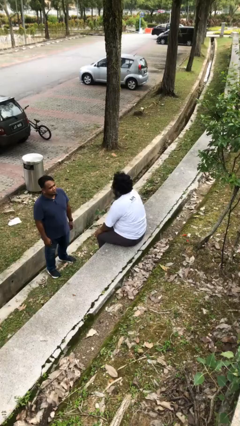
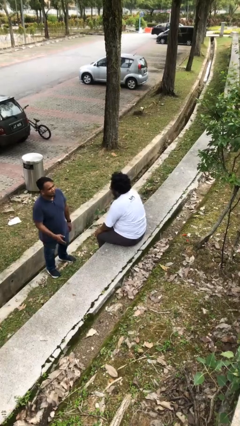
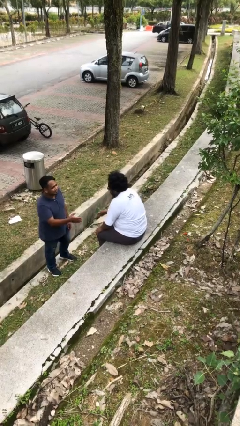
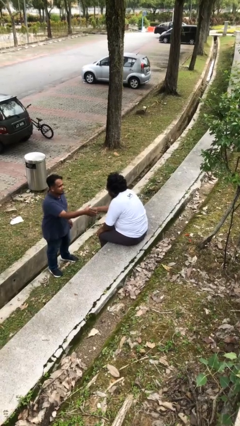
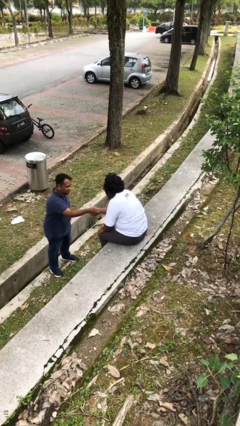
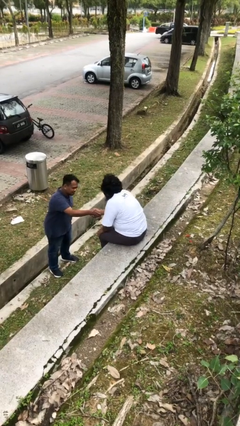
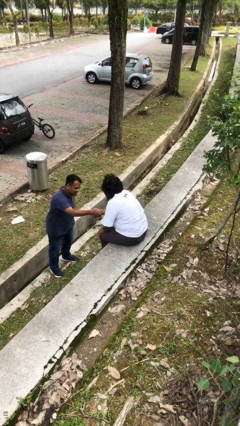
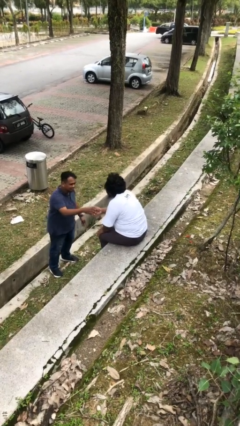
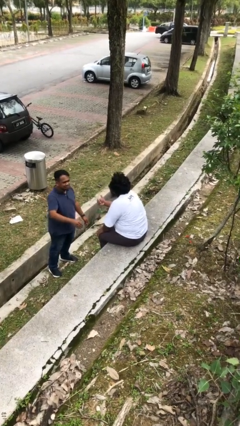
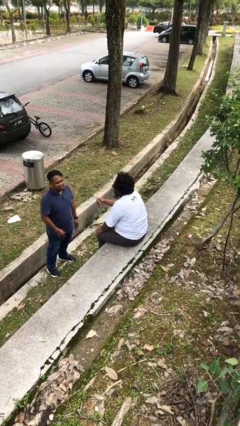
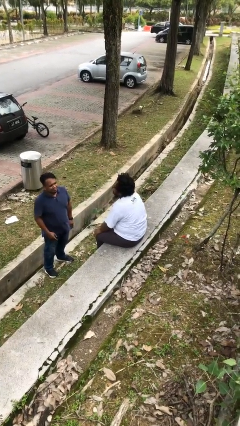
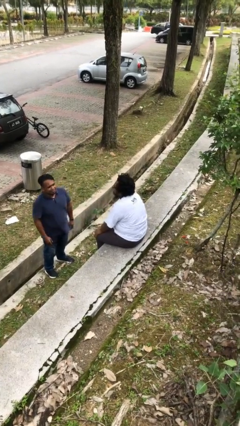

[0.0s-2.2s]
person shakes hand

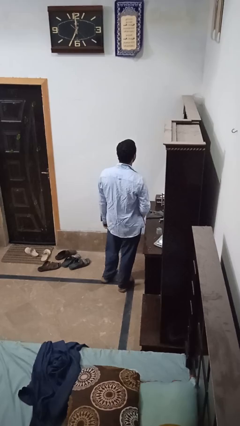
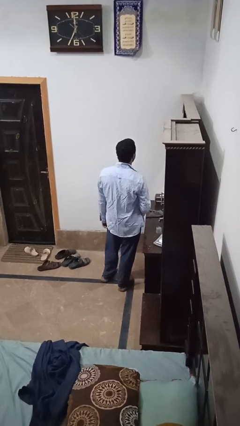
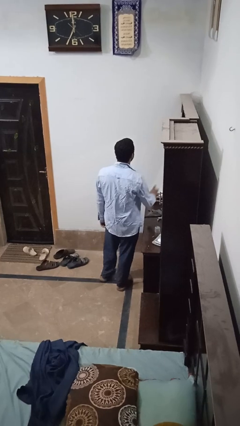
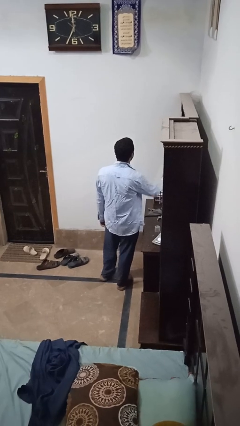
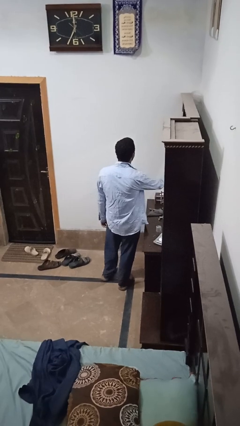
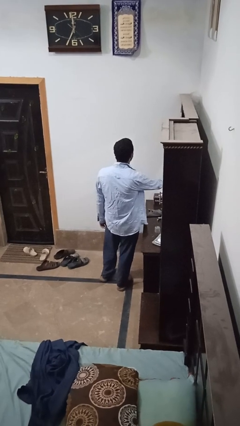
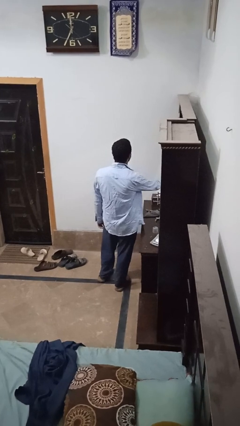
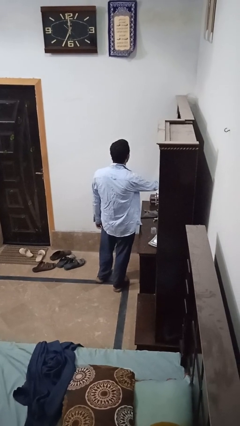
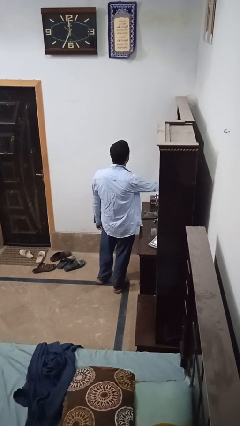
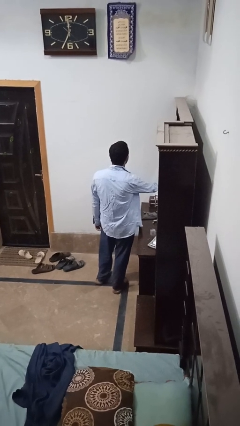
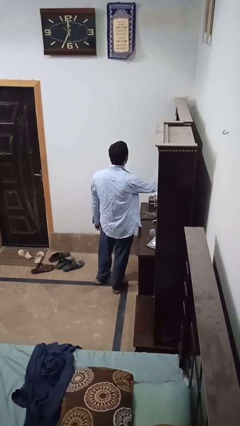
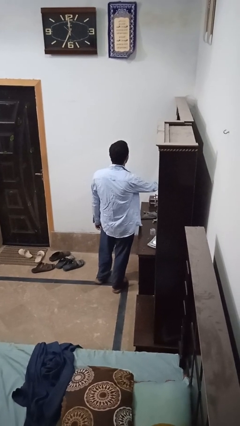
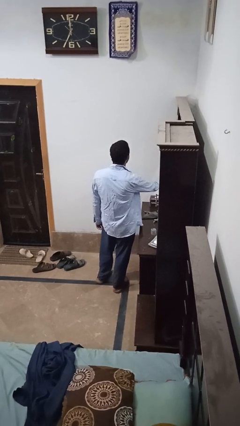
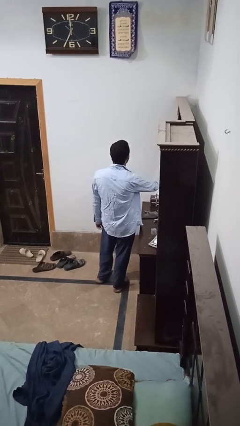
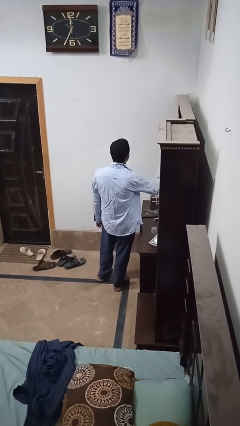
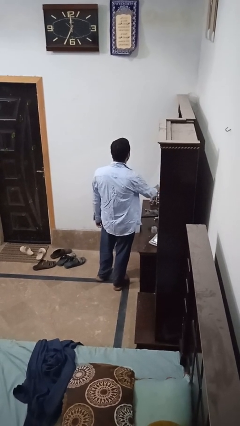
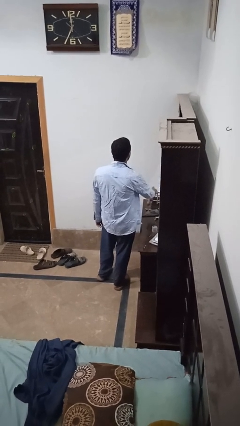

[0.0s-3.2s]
person sprays from bottle

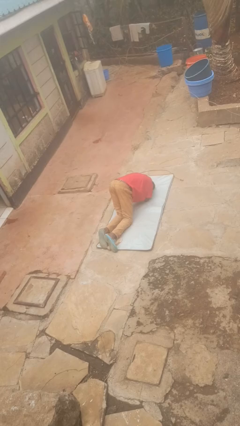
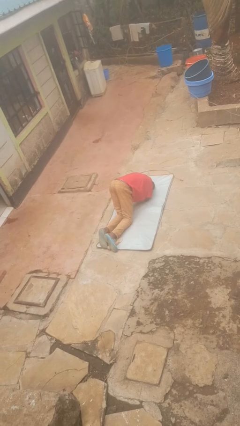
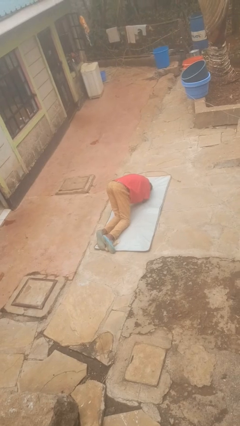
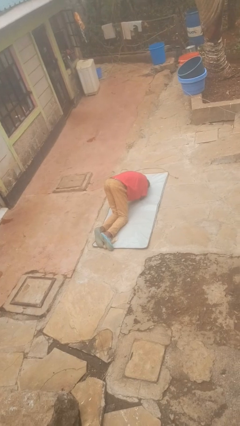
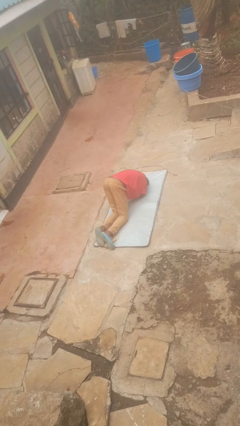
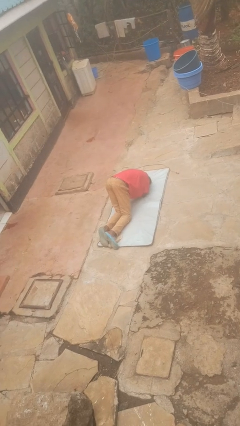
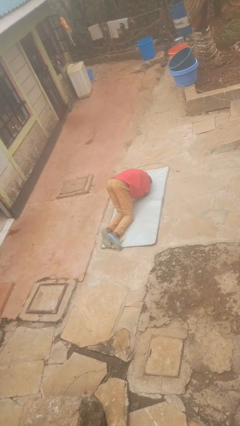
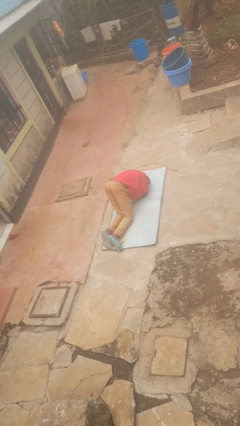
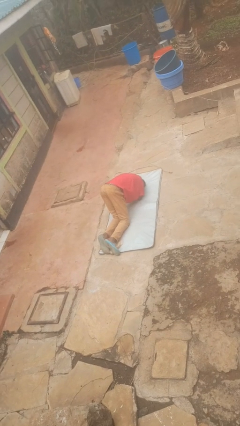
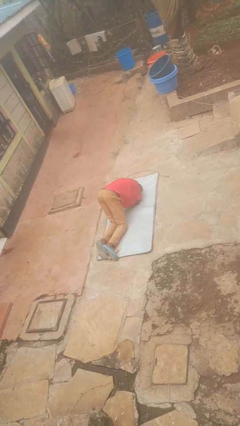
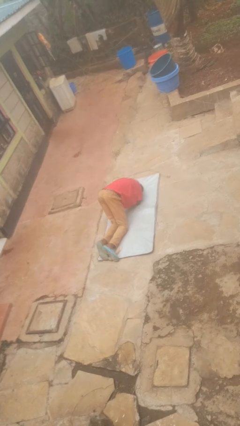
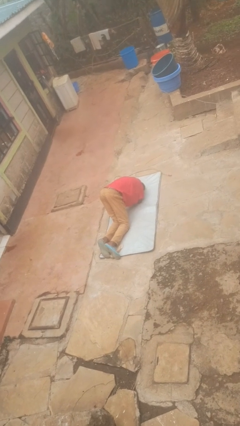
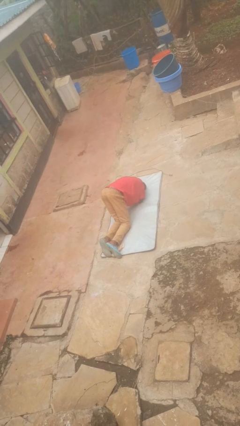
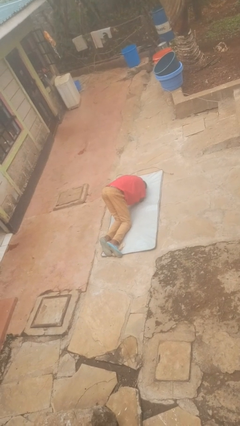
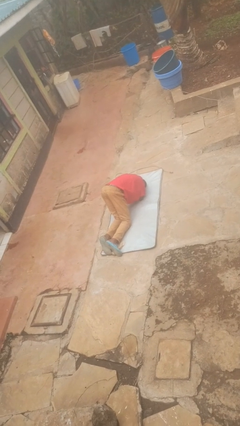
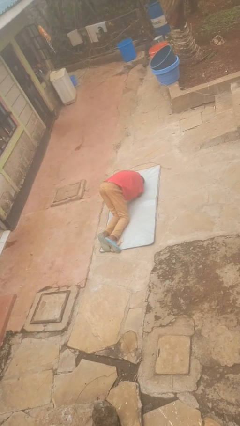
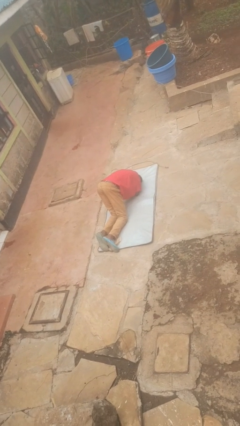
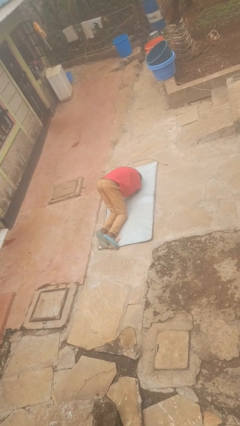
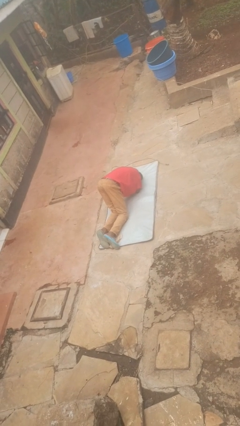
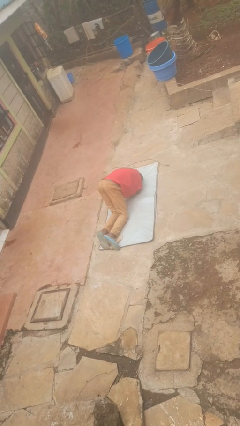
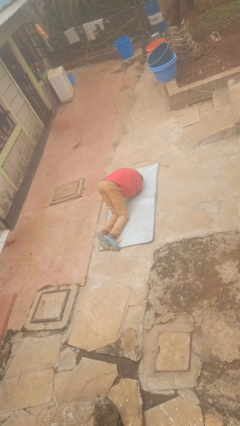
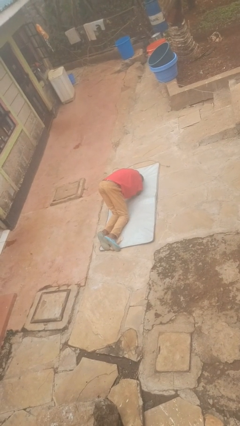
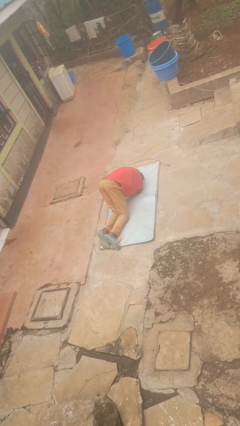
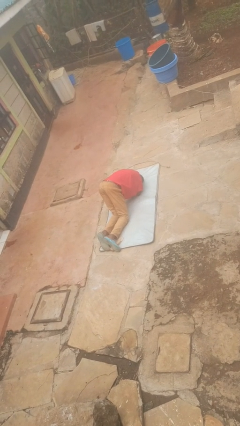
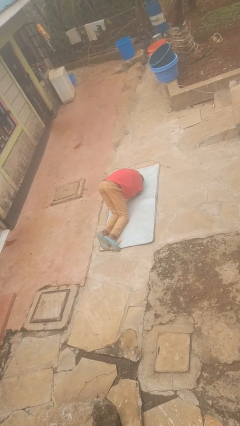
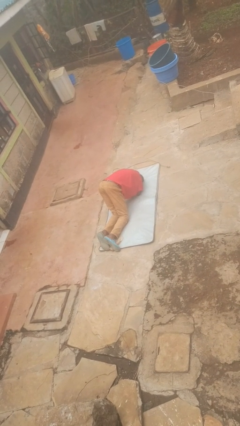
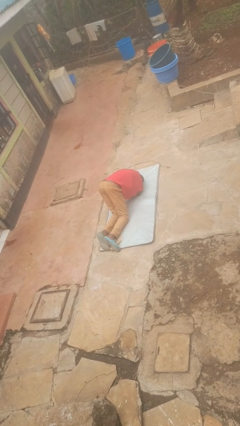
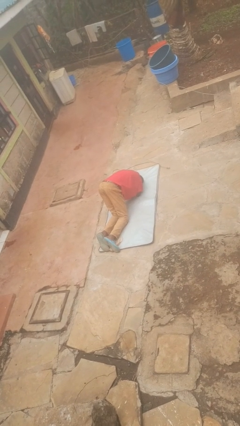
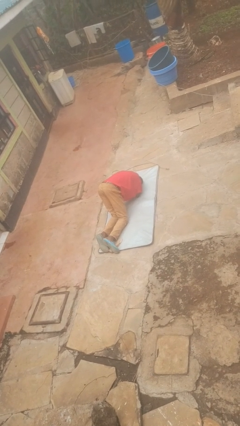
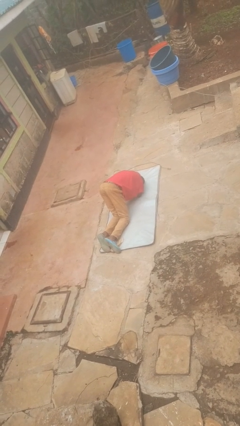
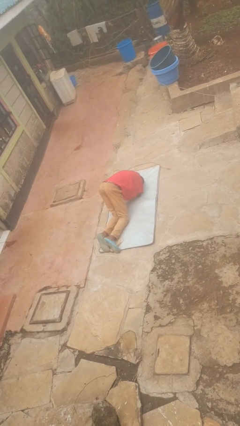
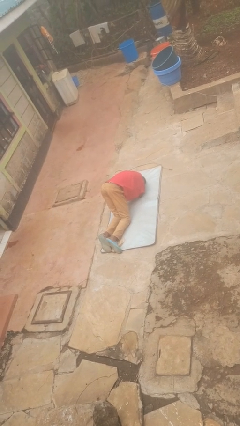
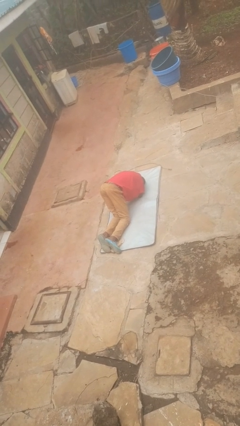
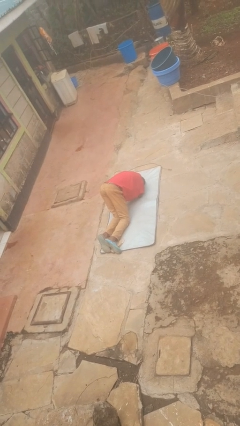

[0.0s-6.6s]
person lies down on floor

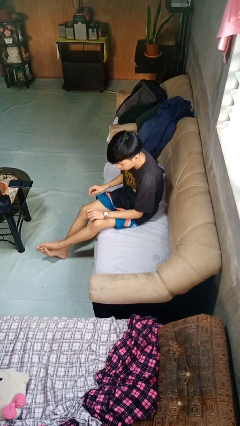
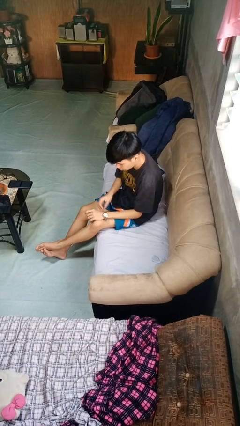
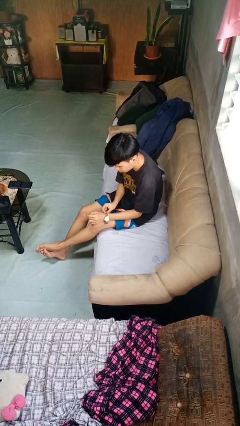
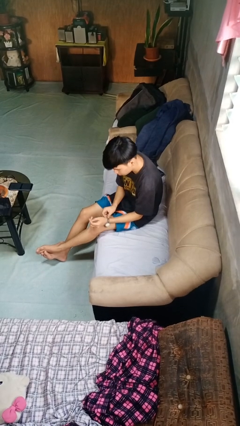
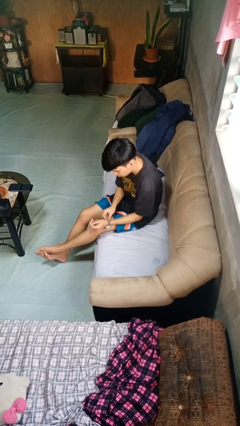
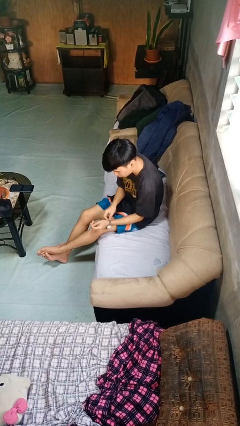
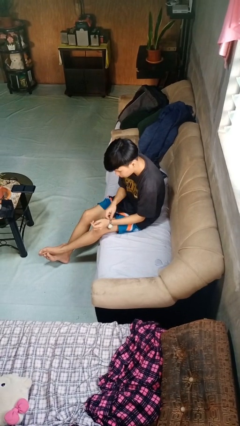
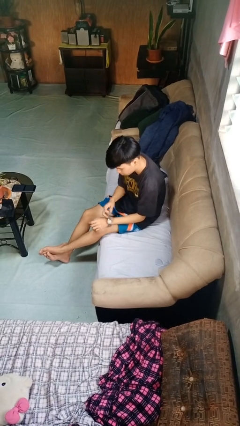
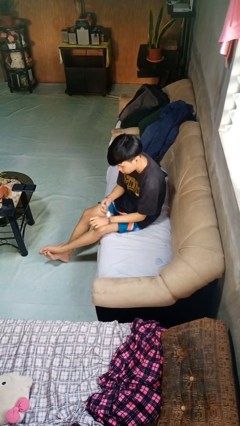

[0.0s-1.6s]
person takes off wristwatch

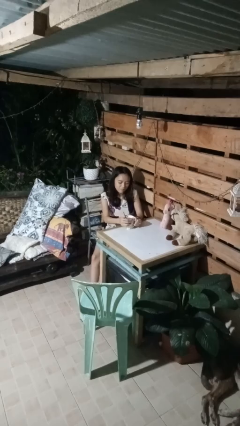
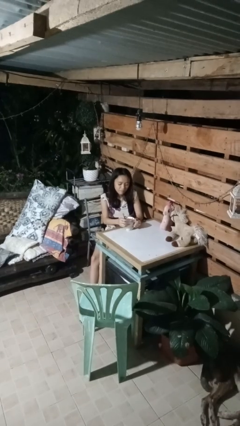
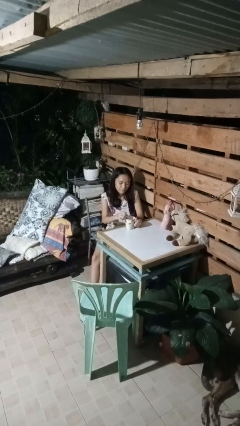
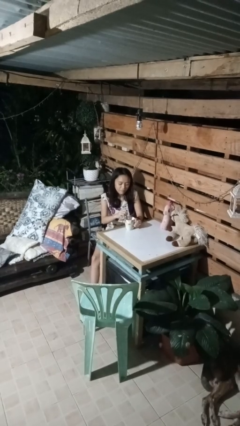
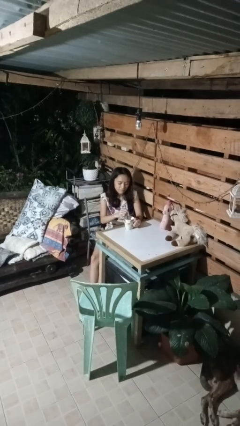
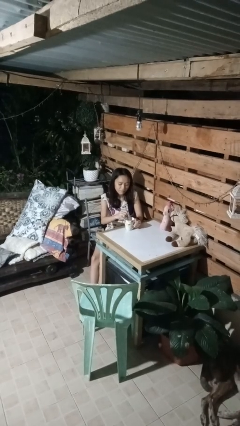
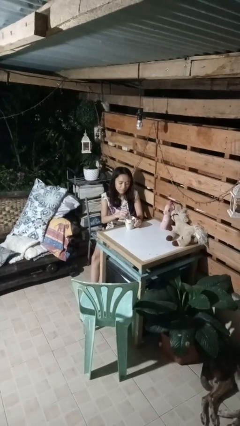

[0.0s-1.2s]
person stirs mug

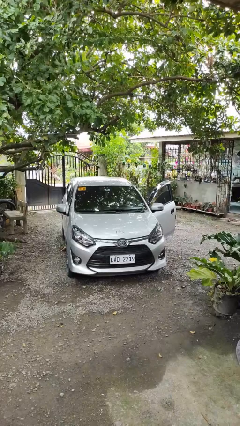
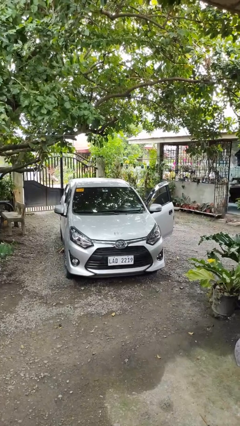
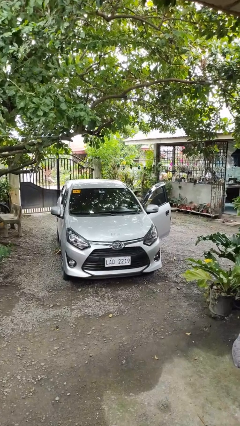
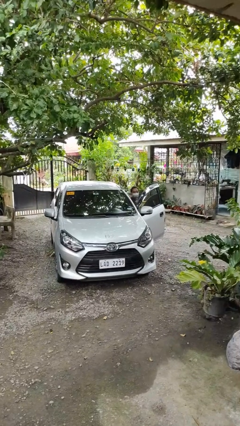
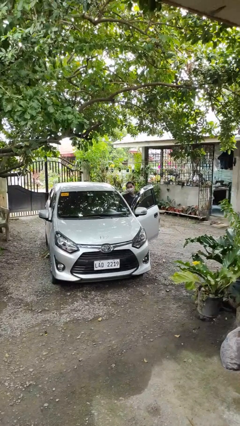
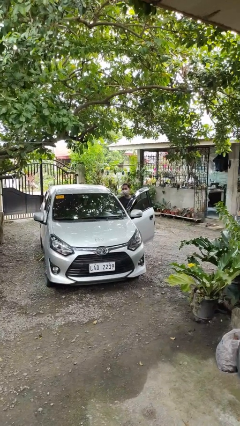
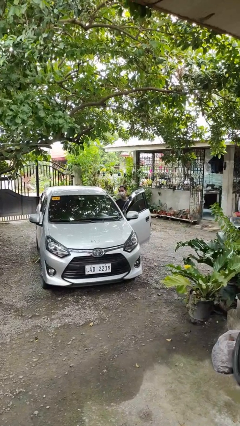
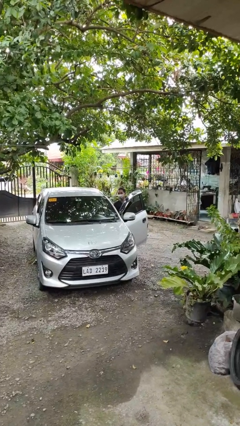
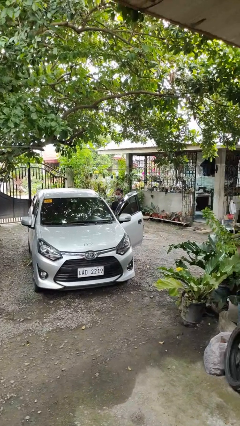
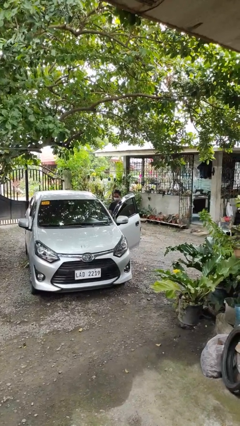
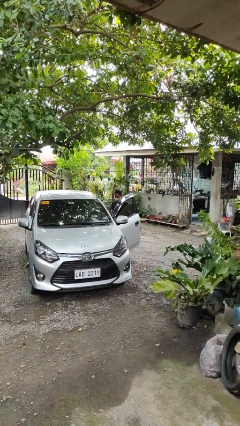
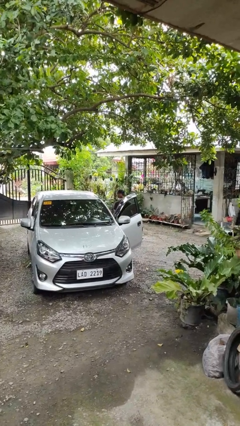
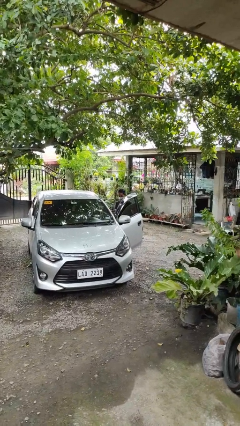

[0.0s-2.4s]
person exits car

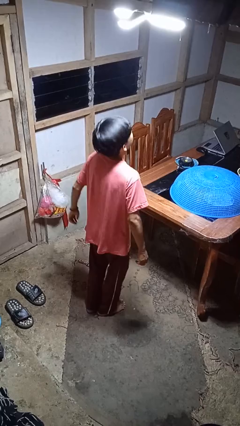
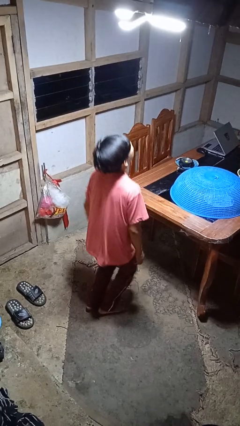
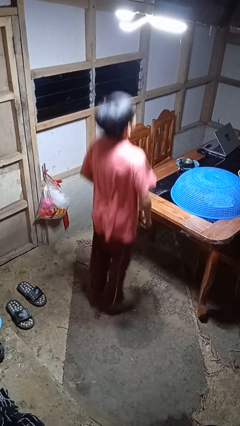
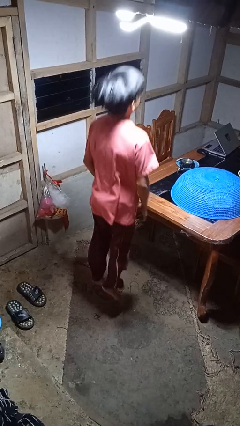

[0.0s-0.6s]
person jumps
